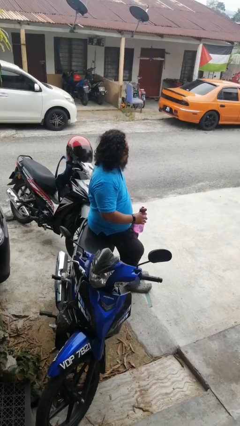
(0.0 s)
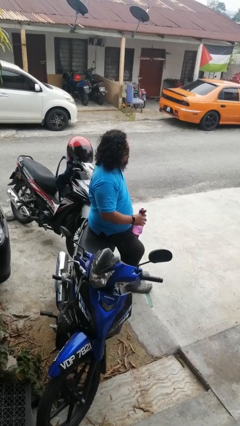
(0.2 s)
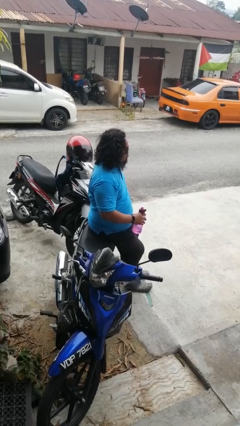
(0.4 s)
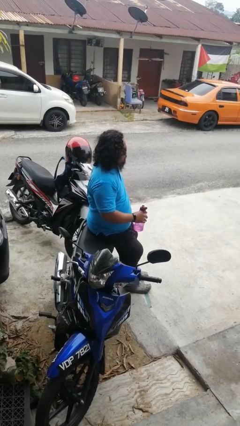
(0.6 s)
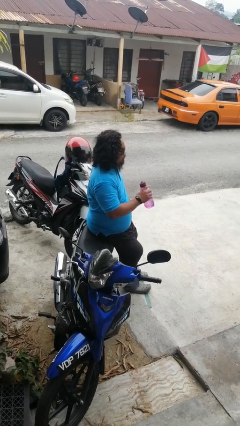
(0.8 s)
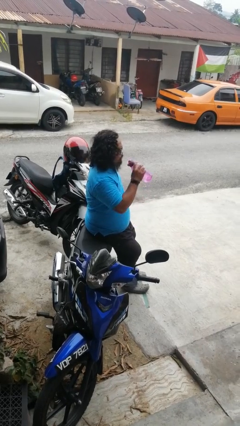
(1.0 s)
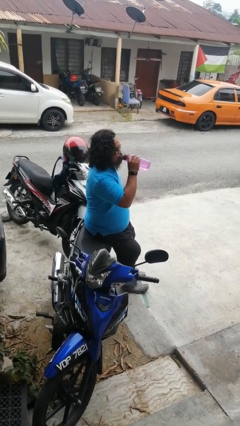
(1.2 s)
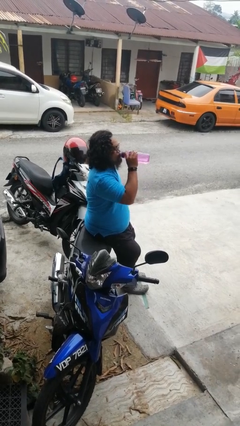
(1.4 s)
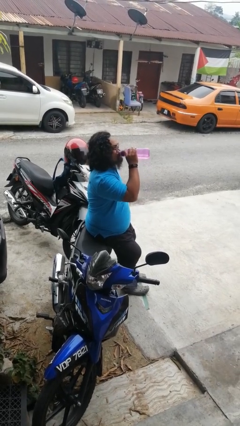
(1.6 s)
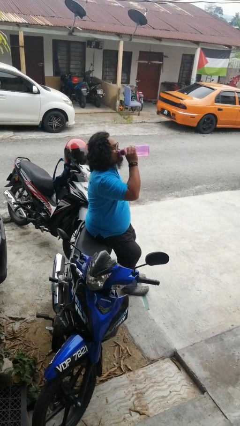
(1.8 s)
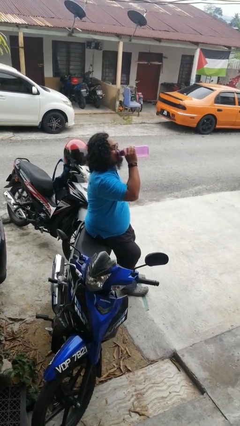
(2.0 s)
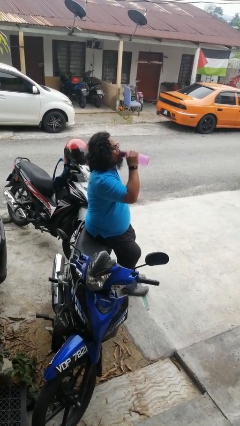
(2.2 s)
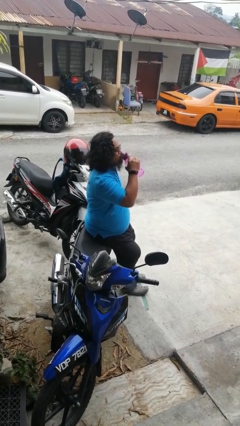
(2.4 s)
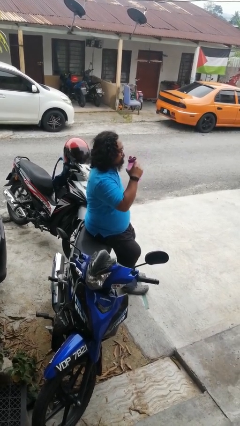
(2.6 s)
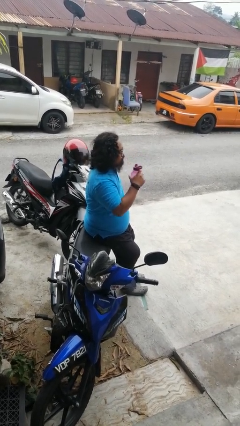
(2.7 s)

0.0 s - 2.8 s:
person drinks from bottle

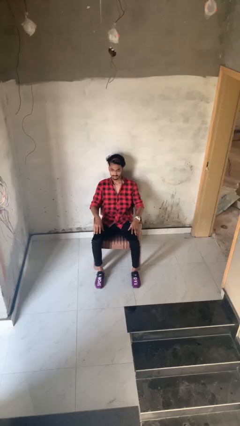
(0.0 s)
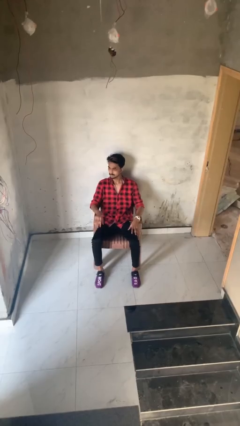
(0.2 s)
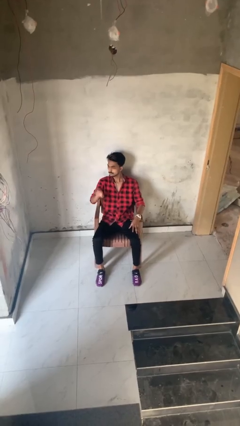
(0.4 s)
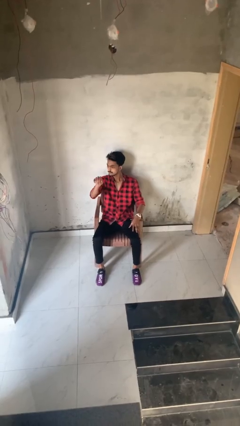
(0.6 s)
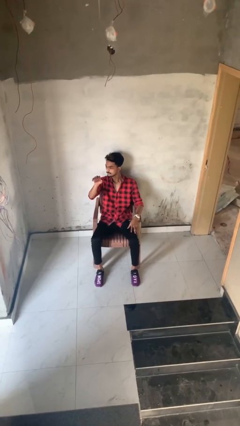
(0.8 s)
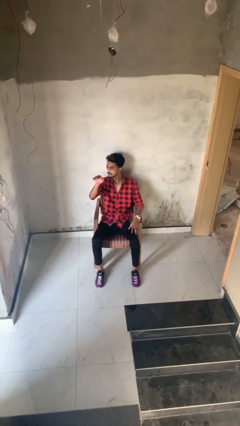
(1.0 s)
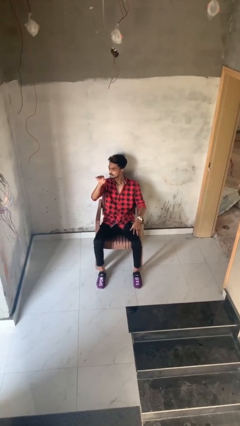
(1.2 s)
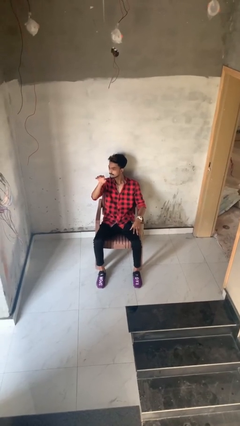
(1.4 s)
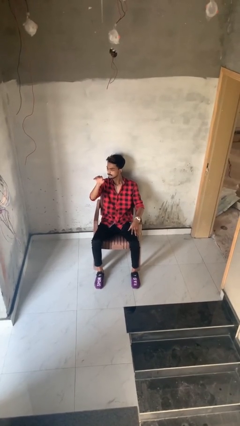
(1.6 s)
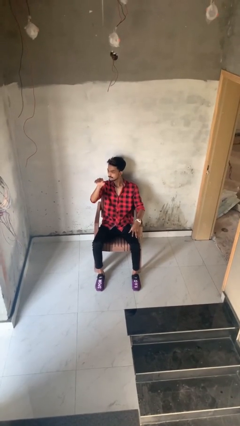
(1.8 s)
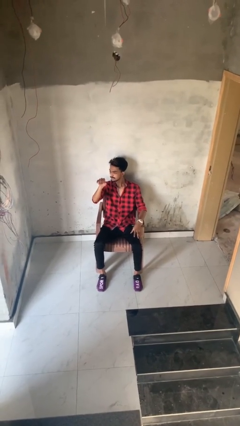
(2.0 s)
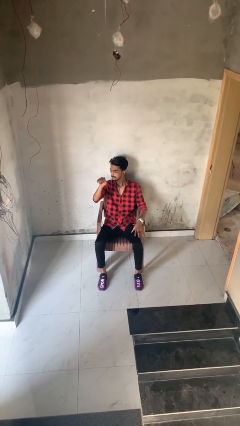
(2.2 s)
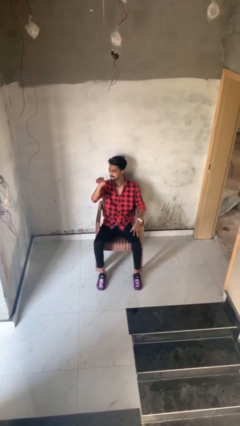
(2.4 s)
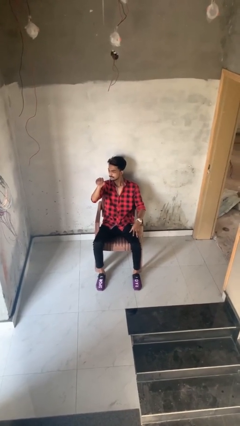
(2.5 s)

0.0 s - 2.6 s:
person gestures come here

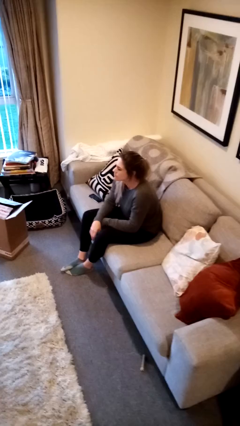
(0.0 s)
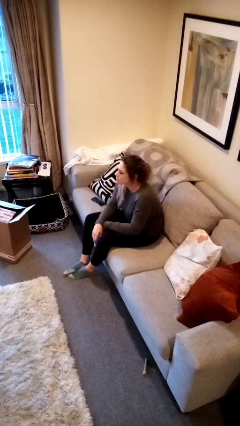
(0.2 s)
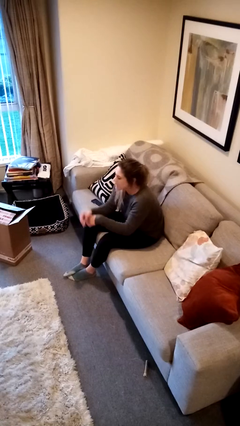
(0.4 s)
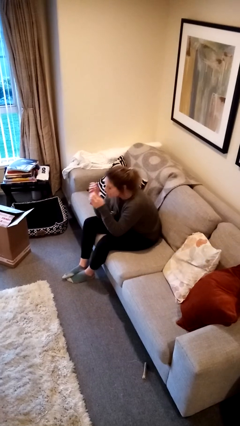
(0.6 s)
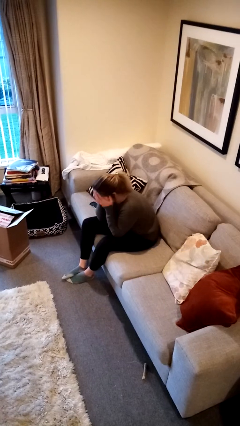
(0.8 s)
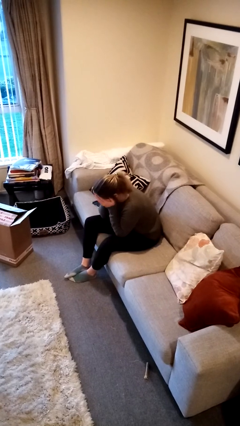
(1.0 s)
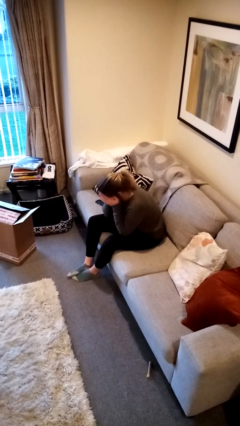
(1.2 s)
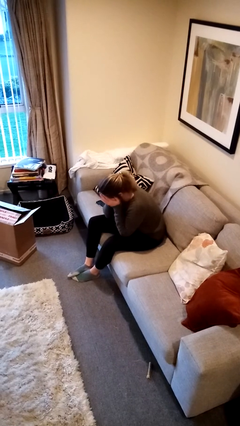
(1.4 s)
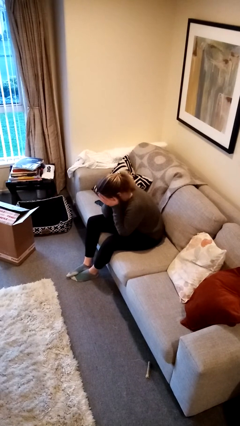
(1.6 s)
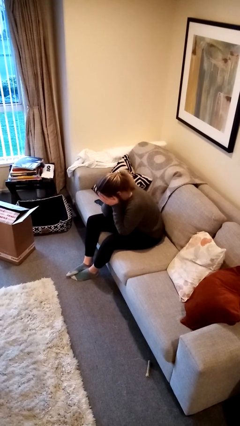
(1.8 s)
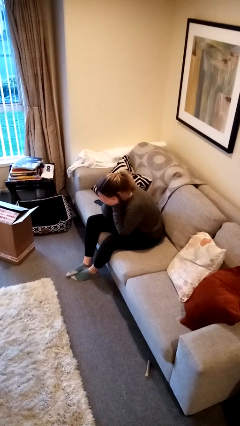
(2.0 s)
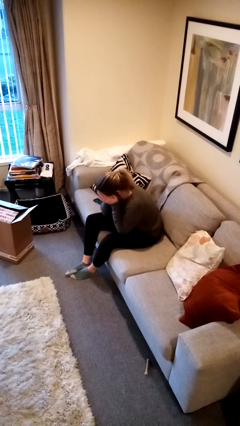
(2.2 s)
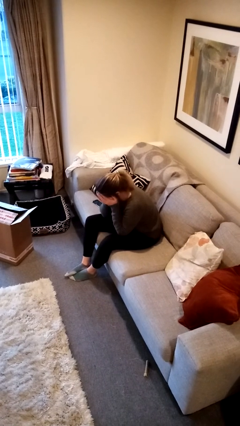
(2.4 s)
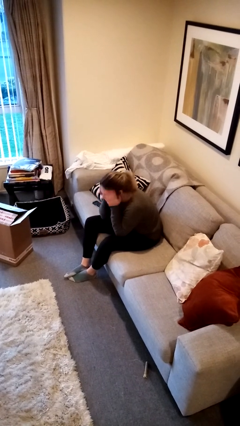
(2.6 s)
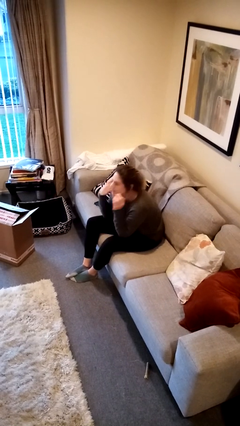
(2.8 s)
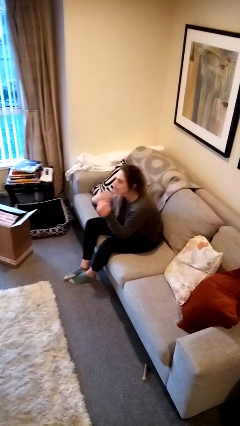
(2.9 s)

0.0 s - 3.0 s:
person covers face with hands

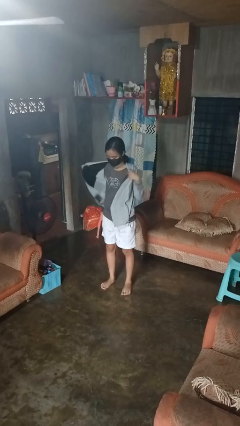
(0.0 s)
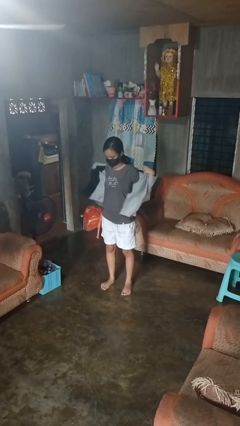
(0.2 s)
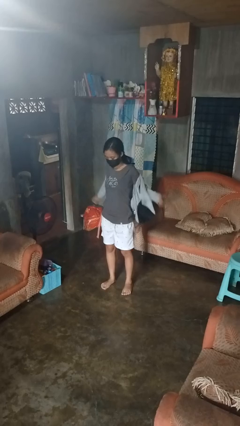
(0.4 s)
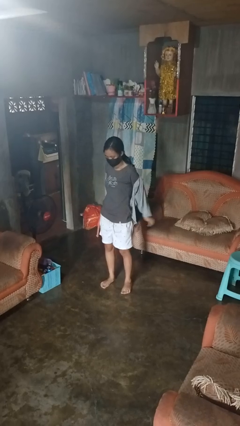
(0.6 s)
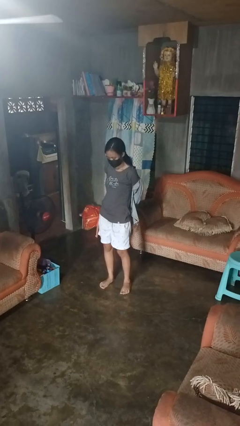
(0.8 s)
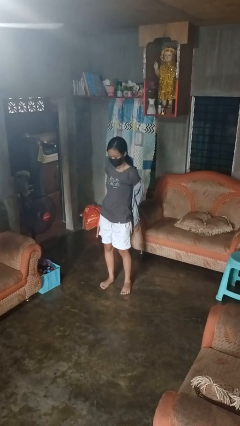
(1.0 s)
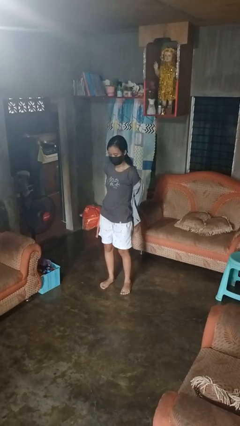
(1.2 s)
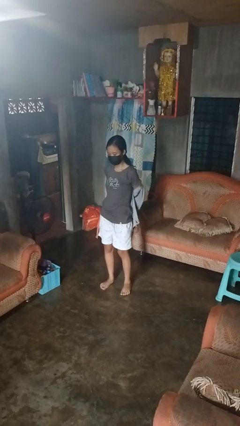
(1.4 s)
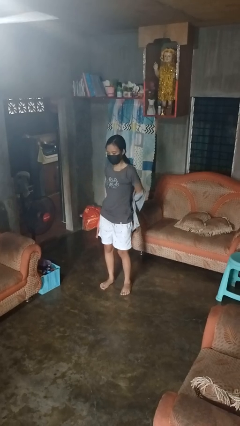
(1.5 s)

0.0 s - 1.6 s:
person takes off jacket

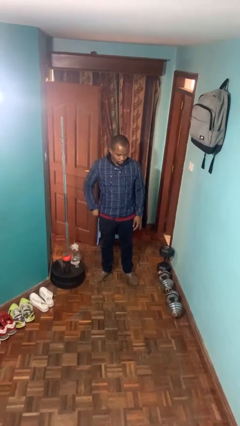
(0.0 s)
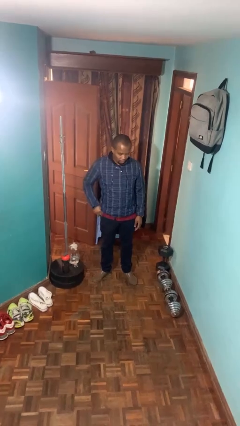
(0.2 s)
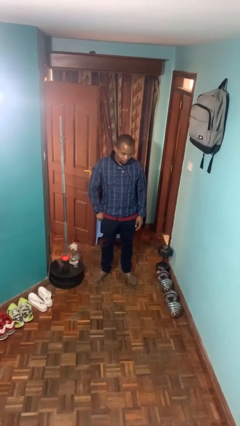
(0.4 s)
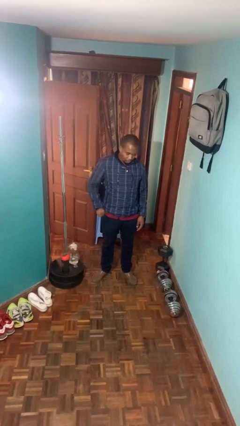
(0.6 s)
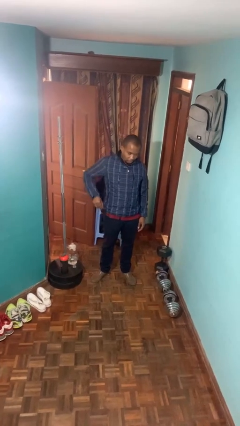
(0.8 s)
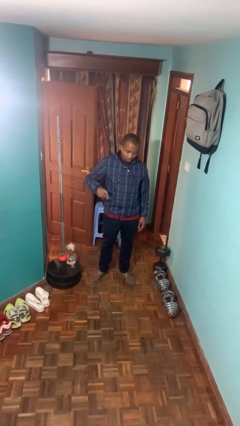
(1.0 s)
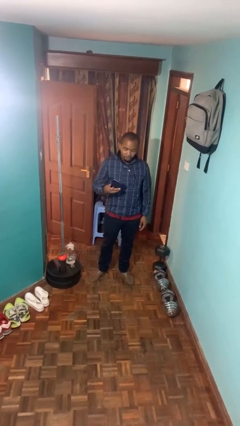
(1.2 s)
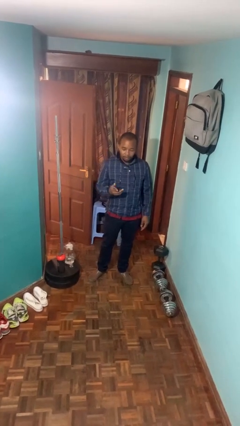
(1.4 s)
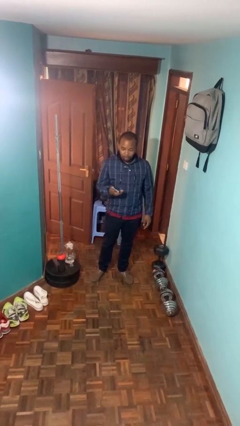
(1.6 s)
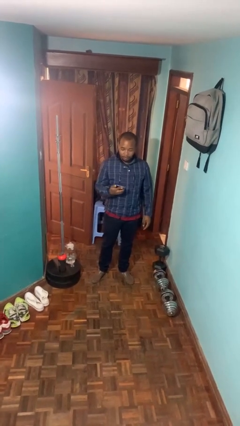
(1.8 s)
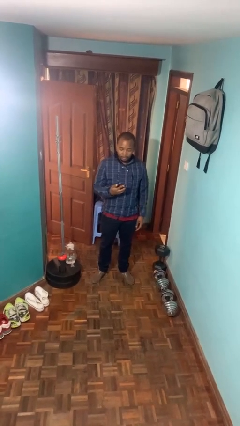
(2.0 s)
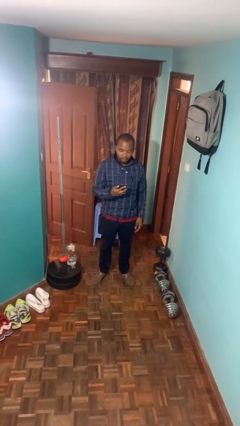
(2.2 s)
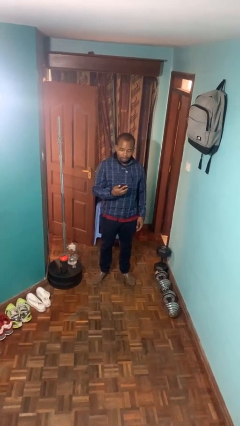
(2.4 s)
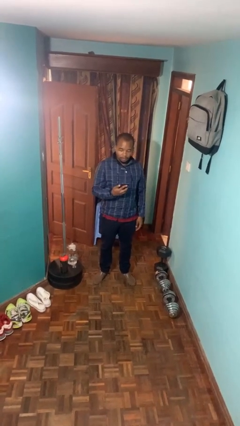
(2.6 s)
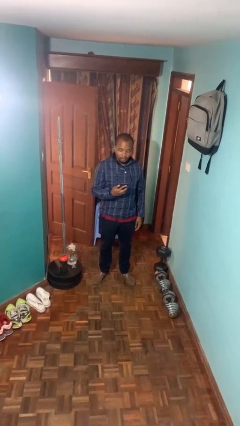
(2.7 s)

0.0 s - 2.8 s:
person takes phone from pocket

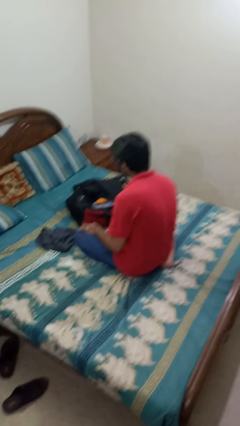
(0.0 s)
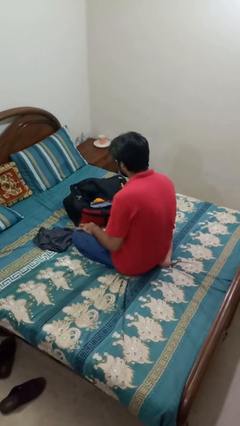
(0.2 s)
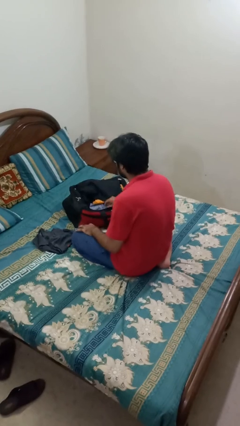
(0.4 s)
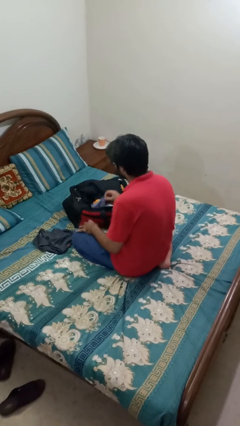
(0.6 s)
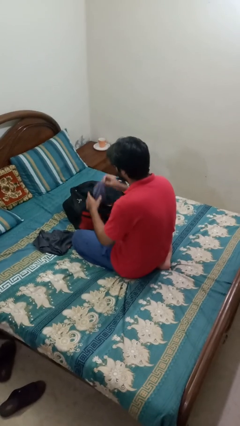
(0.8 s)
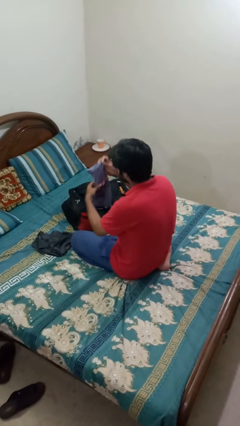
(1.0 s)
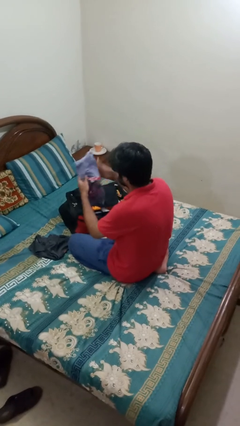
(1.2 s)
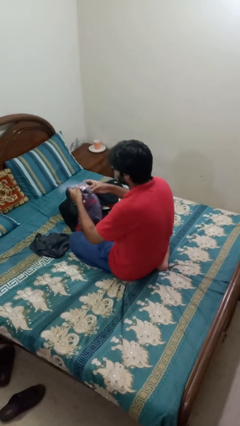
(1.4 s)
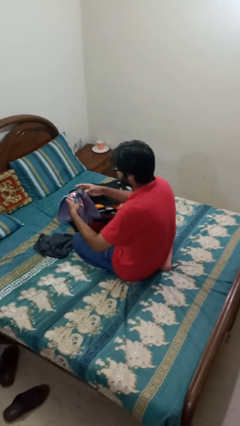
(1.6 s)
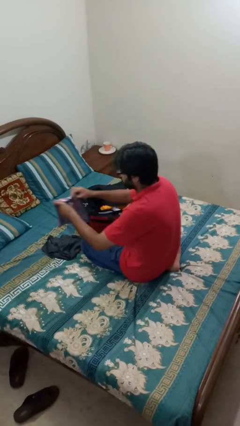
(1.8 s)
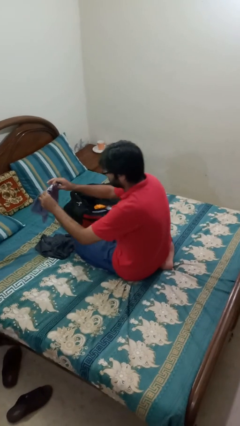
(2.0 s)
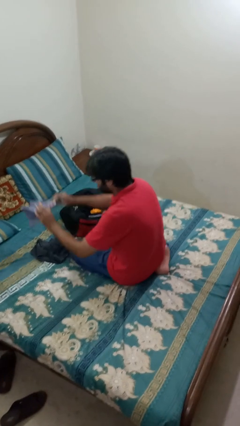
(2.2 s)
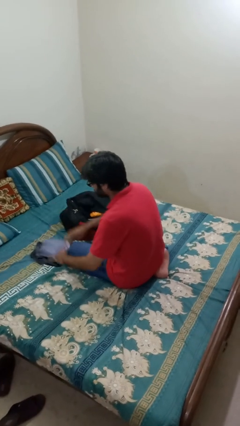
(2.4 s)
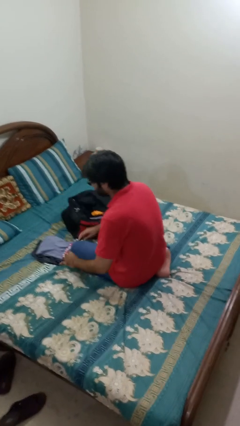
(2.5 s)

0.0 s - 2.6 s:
person unloads clothes from suitcase

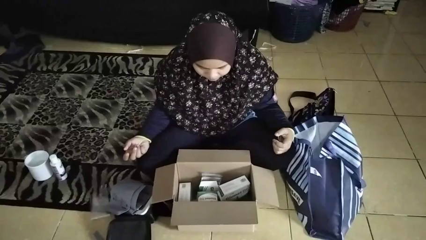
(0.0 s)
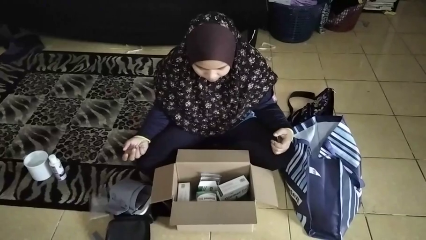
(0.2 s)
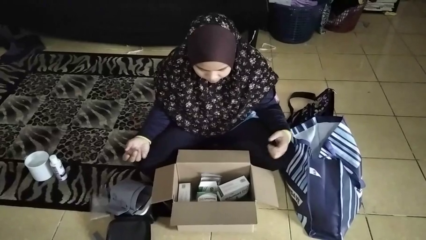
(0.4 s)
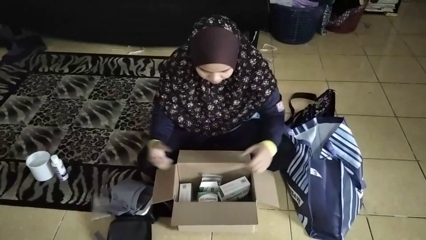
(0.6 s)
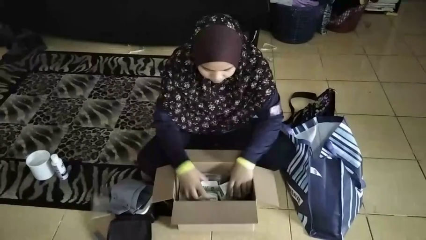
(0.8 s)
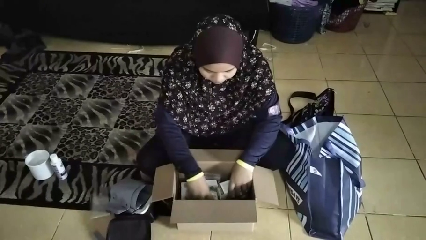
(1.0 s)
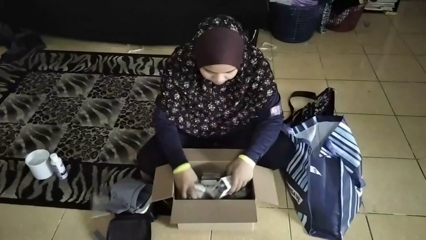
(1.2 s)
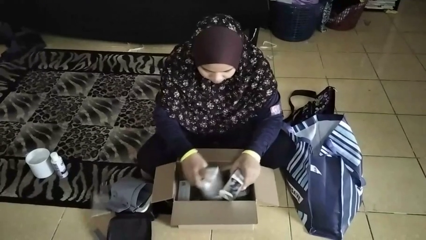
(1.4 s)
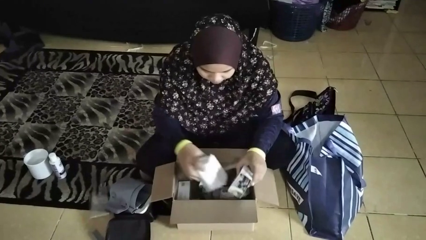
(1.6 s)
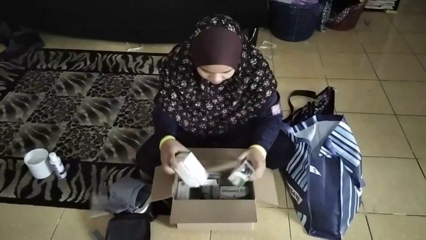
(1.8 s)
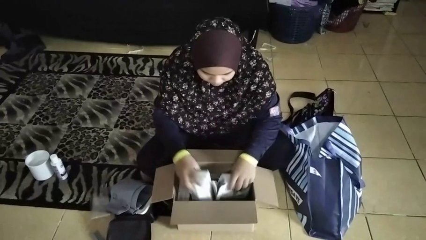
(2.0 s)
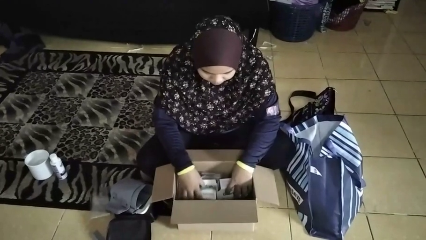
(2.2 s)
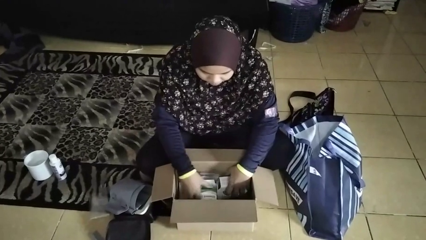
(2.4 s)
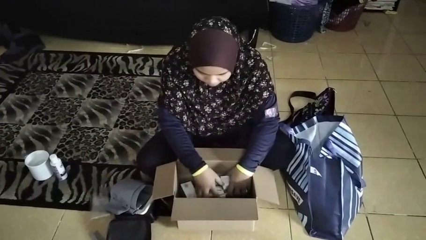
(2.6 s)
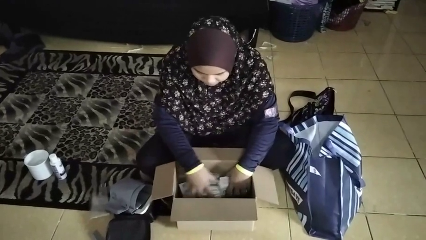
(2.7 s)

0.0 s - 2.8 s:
person searches in box
